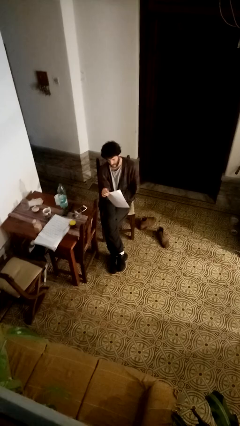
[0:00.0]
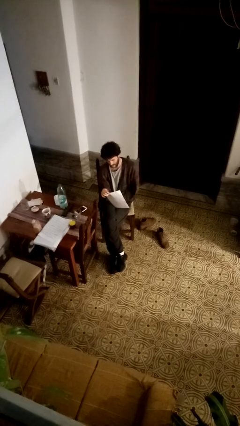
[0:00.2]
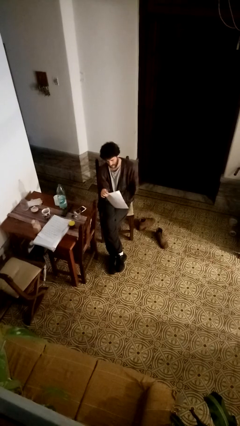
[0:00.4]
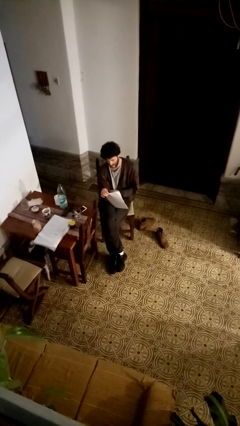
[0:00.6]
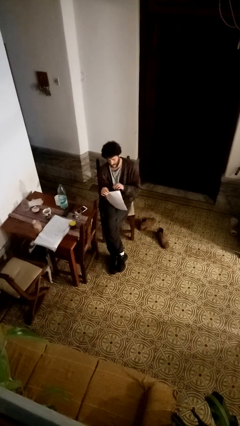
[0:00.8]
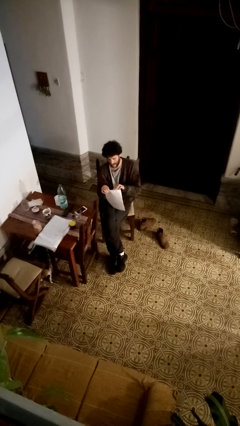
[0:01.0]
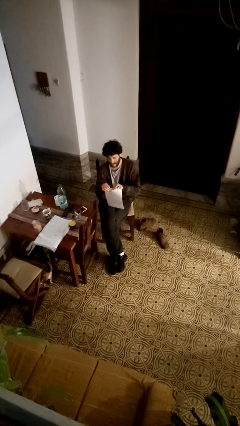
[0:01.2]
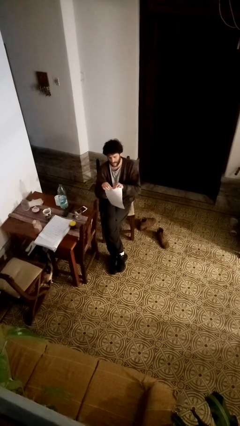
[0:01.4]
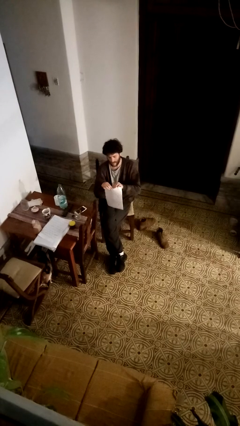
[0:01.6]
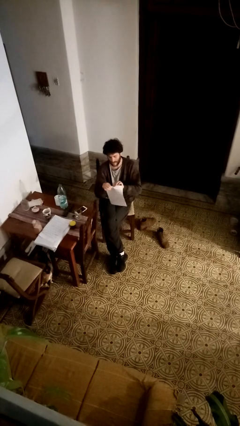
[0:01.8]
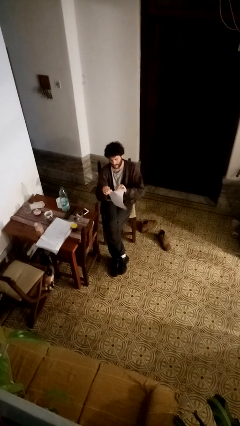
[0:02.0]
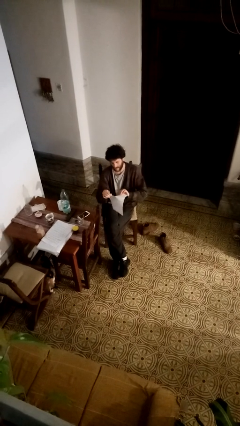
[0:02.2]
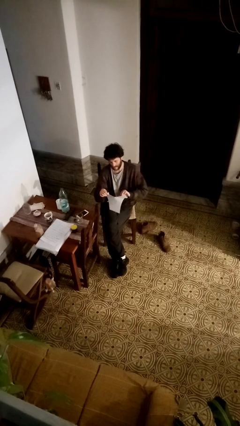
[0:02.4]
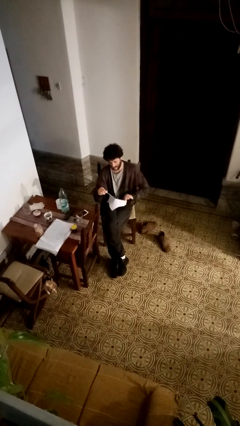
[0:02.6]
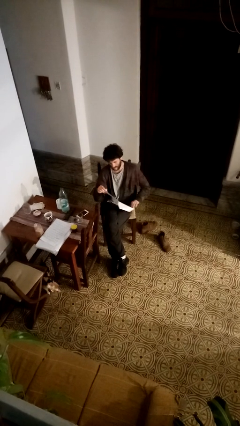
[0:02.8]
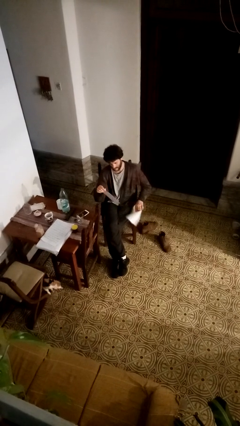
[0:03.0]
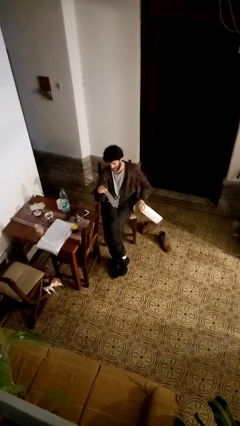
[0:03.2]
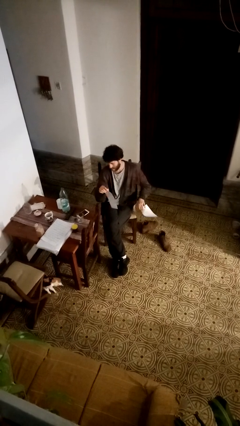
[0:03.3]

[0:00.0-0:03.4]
person tears paper

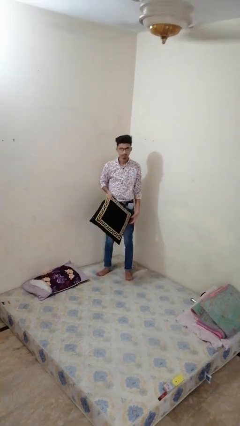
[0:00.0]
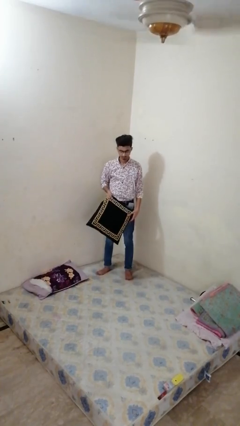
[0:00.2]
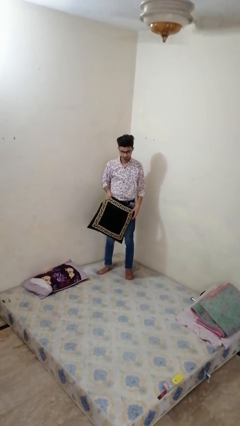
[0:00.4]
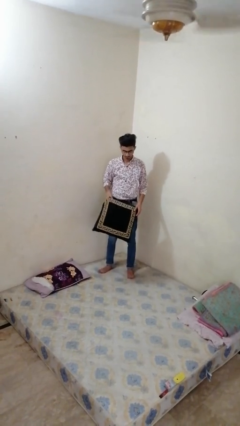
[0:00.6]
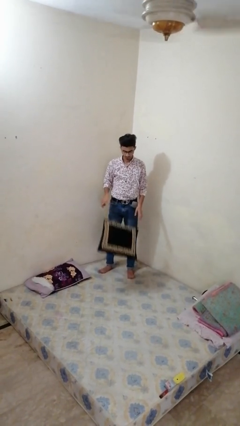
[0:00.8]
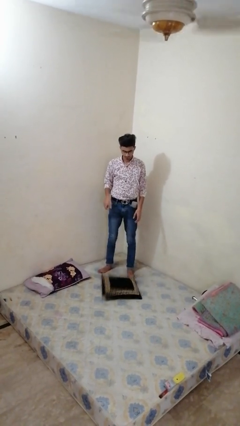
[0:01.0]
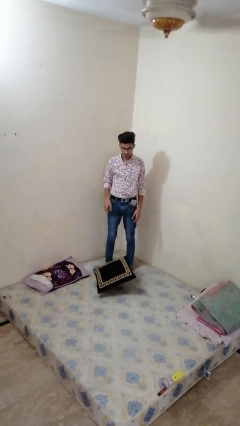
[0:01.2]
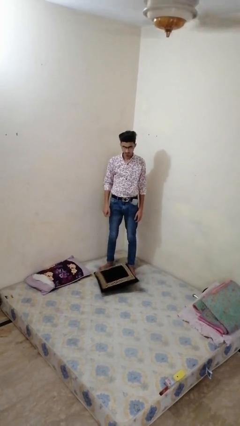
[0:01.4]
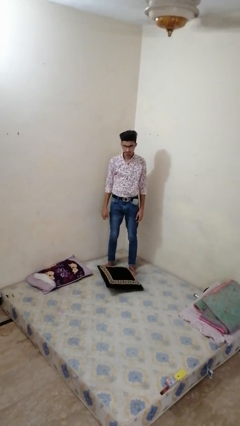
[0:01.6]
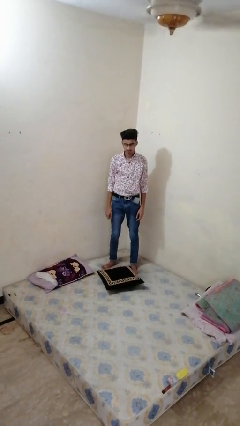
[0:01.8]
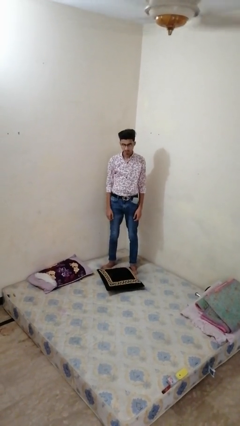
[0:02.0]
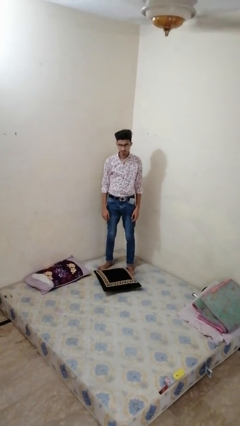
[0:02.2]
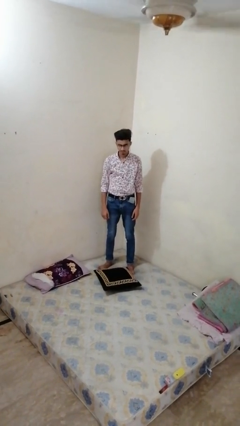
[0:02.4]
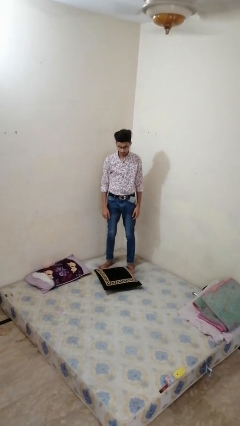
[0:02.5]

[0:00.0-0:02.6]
person throws object on bed

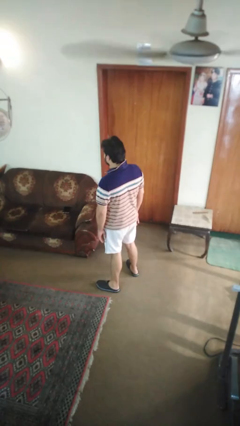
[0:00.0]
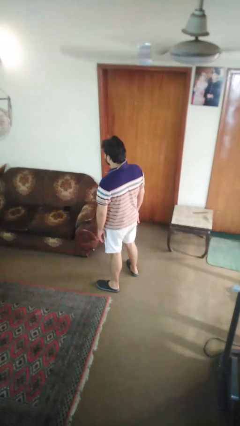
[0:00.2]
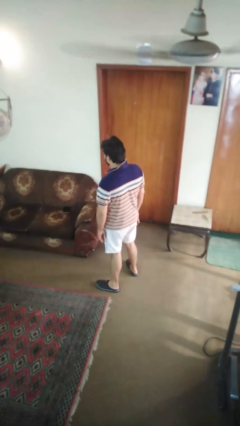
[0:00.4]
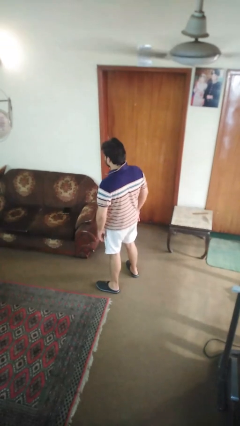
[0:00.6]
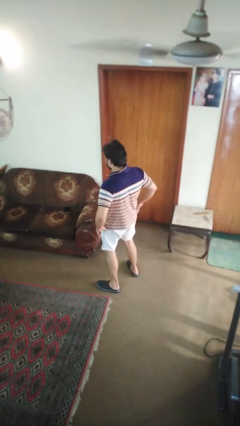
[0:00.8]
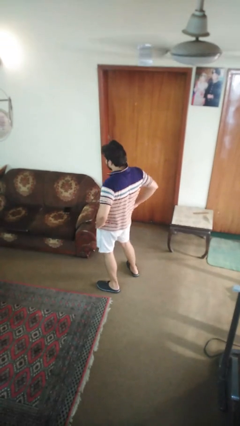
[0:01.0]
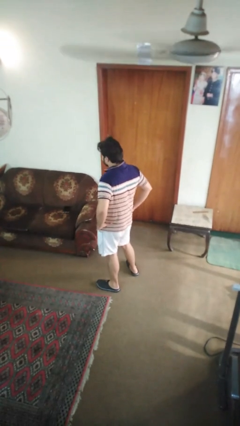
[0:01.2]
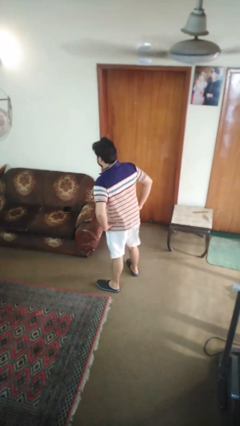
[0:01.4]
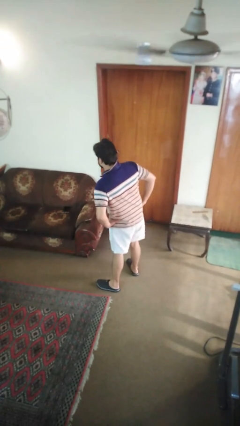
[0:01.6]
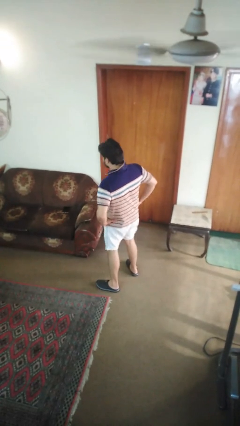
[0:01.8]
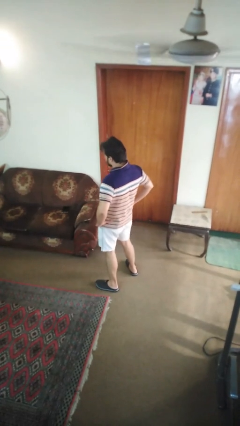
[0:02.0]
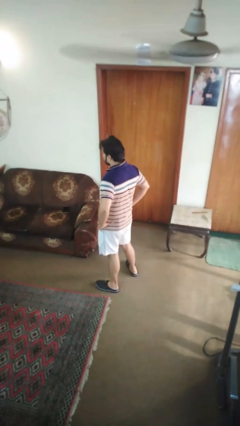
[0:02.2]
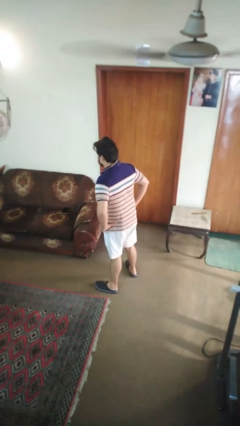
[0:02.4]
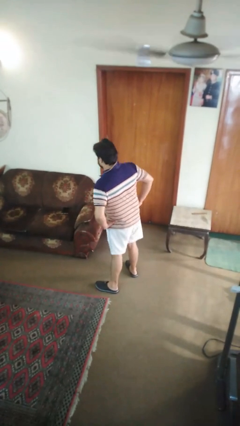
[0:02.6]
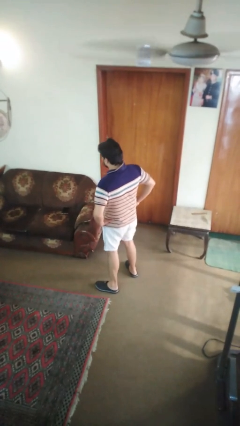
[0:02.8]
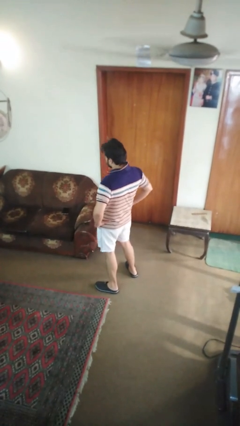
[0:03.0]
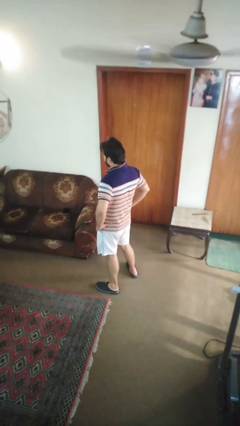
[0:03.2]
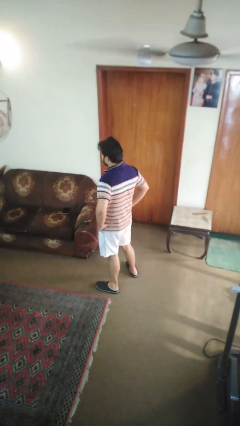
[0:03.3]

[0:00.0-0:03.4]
person wiggles hips

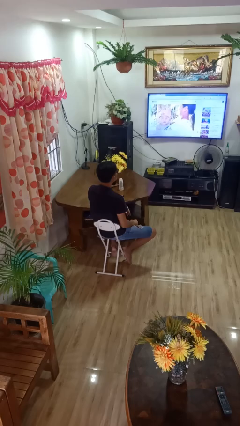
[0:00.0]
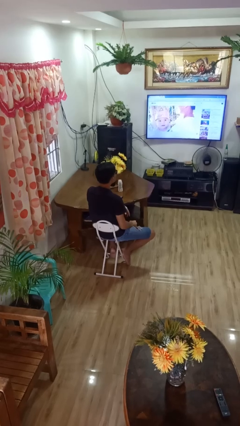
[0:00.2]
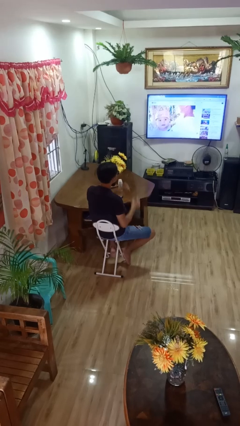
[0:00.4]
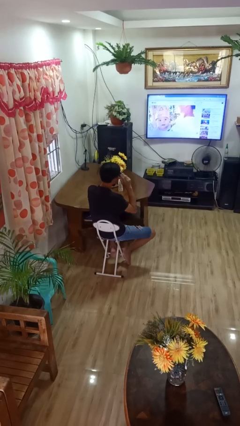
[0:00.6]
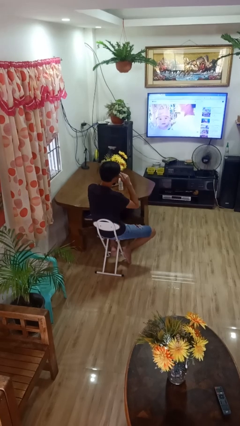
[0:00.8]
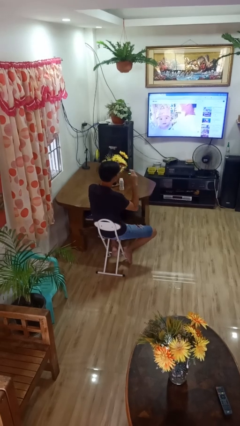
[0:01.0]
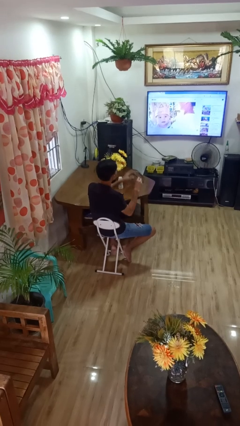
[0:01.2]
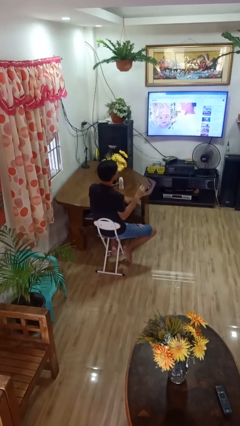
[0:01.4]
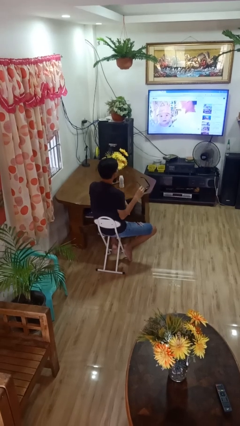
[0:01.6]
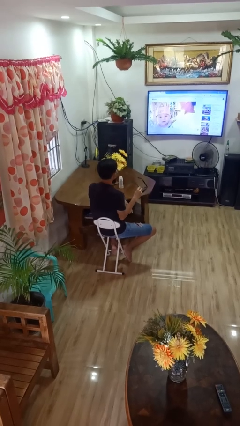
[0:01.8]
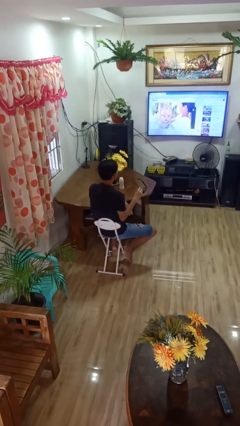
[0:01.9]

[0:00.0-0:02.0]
person takes off sunglasses

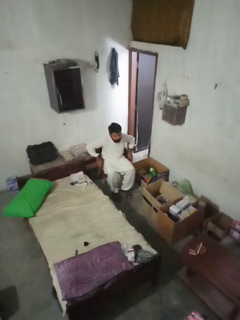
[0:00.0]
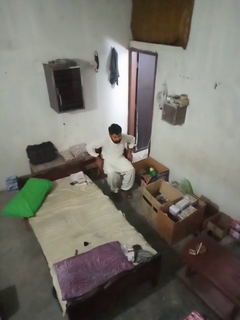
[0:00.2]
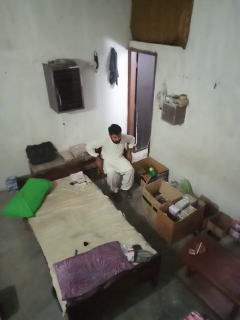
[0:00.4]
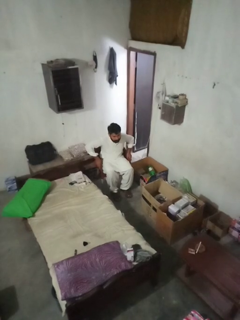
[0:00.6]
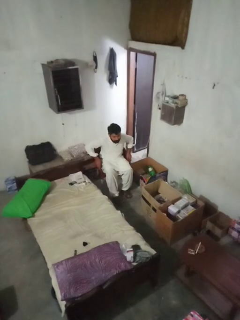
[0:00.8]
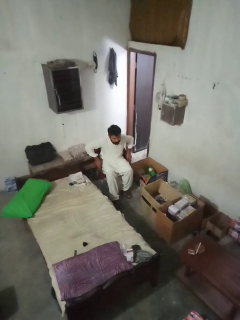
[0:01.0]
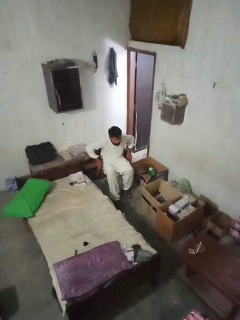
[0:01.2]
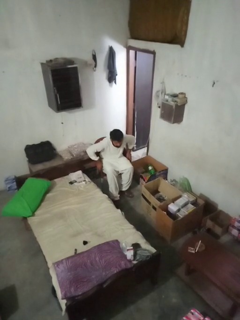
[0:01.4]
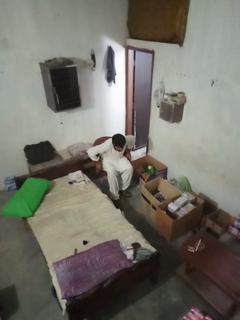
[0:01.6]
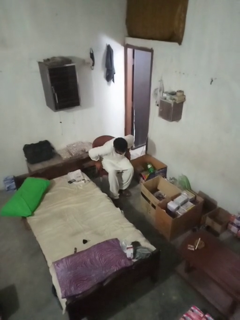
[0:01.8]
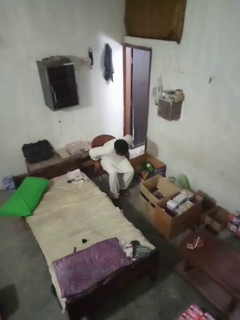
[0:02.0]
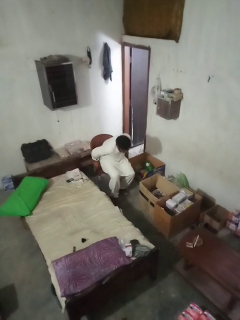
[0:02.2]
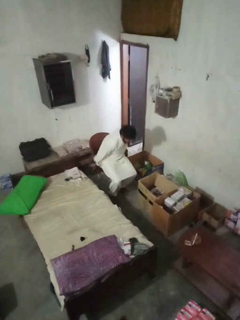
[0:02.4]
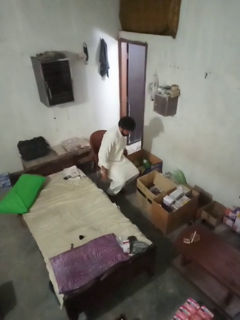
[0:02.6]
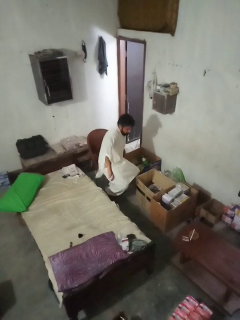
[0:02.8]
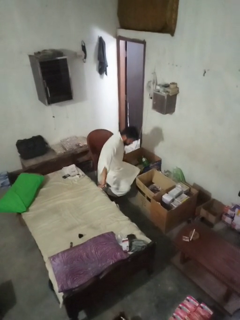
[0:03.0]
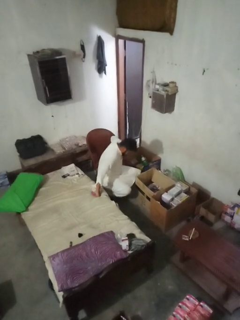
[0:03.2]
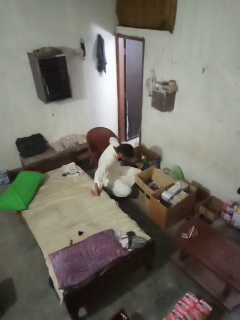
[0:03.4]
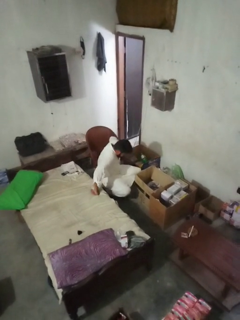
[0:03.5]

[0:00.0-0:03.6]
person falls from chair

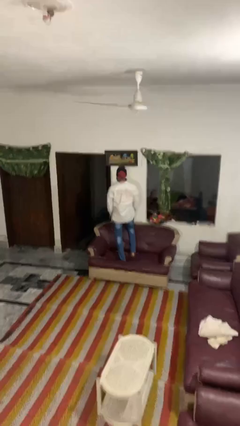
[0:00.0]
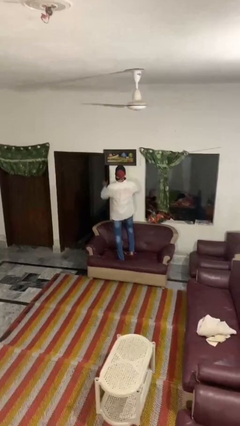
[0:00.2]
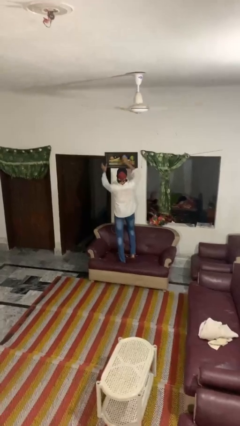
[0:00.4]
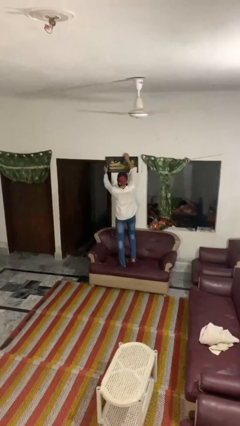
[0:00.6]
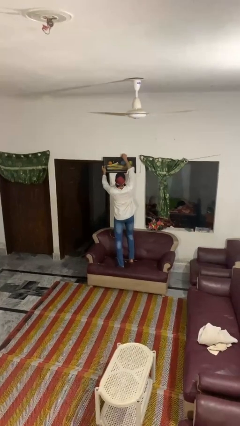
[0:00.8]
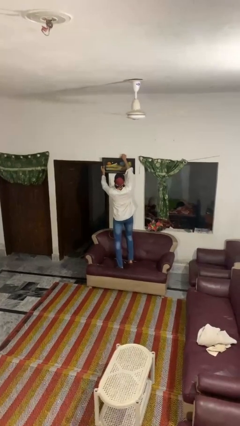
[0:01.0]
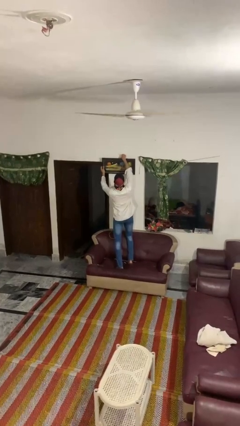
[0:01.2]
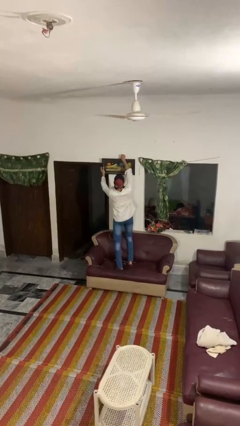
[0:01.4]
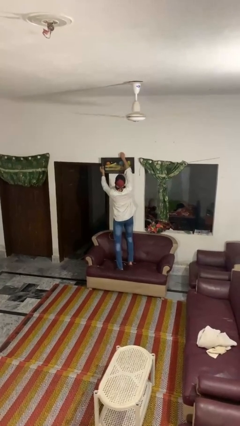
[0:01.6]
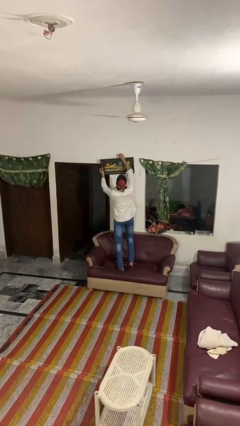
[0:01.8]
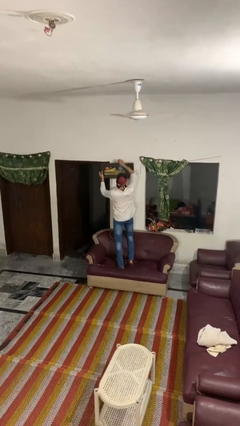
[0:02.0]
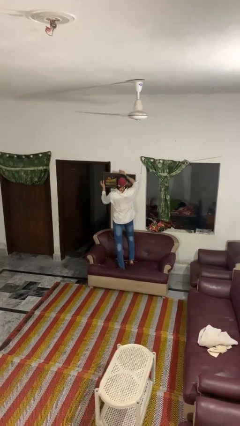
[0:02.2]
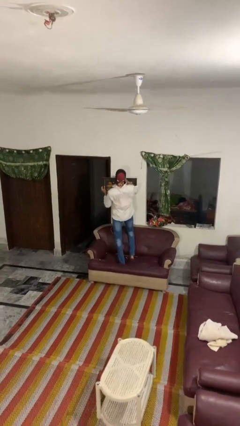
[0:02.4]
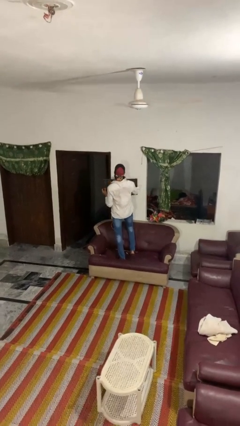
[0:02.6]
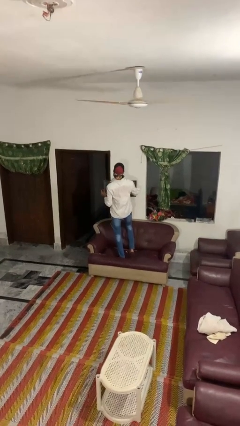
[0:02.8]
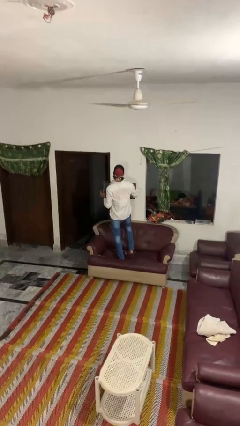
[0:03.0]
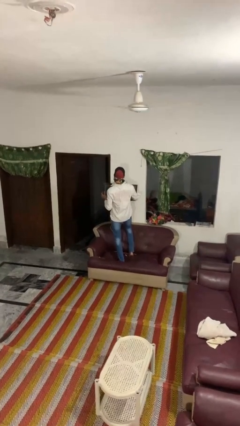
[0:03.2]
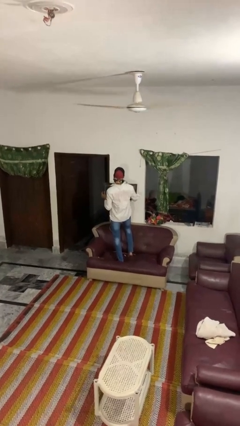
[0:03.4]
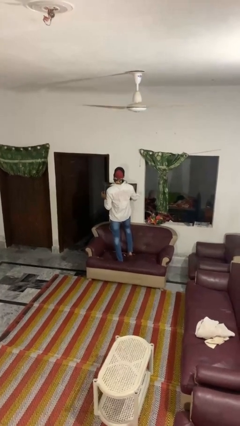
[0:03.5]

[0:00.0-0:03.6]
person takes down picture frame
